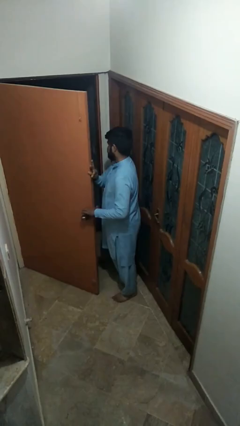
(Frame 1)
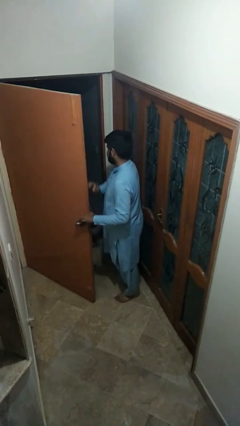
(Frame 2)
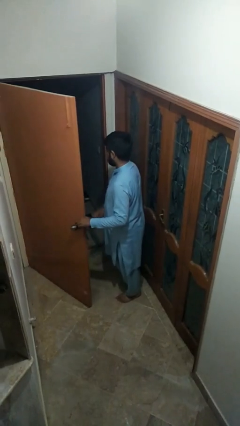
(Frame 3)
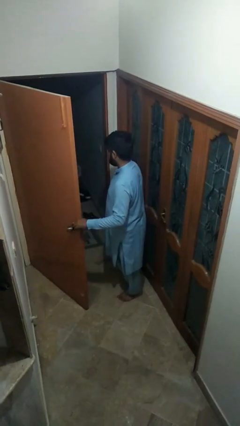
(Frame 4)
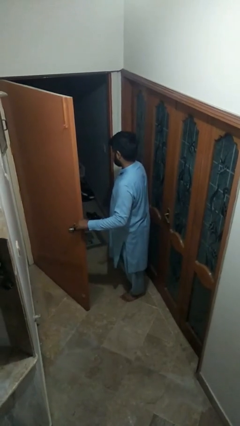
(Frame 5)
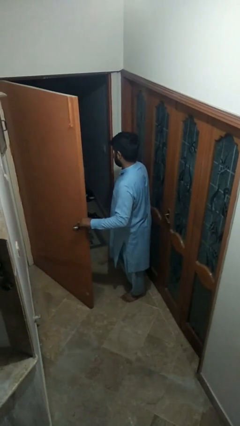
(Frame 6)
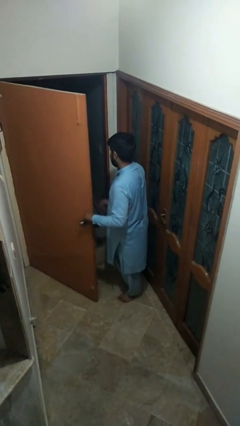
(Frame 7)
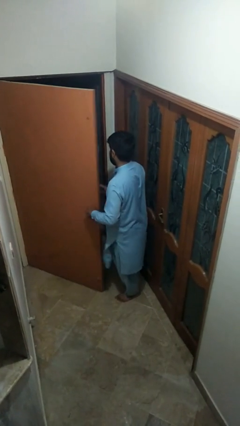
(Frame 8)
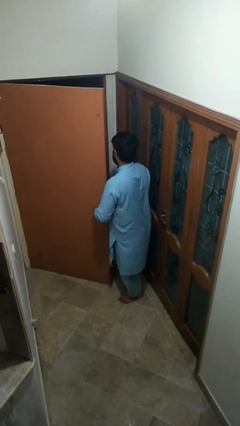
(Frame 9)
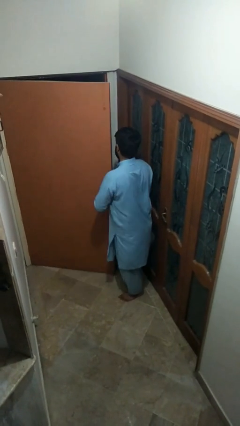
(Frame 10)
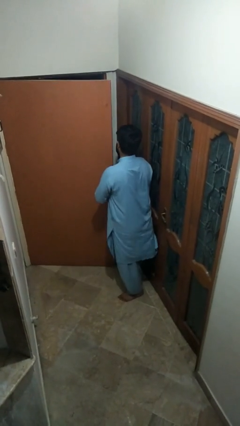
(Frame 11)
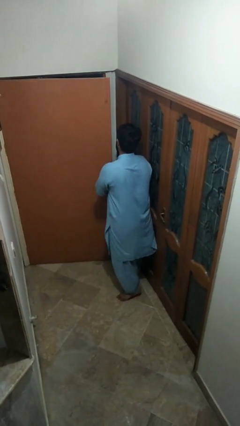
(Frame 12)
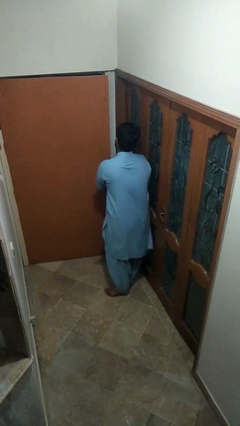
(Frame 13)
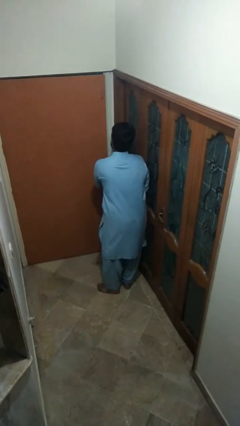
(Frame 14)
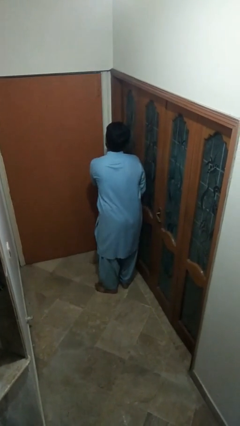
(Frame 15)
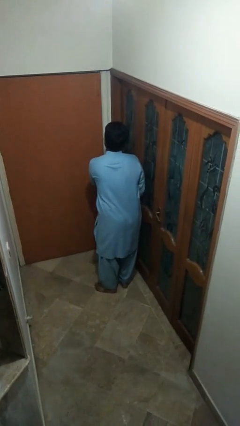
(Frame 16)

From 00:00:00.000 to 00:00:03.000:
person closes facility door

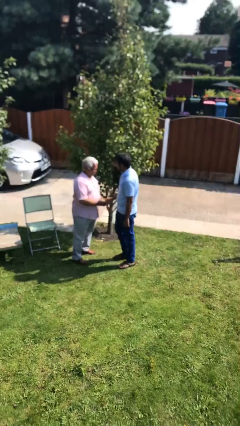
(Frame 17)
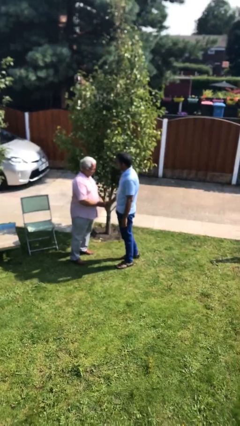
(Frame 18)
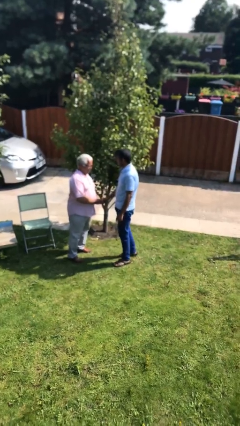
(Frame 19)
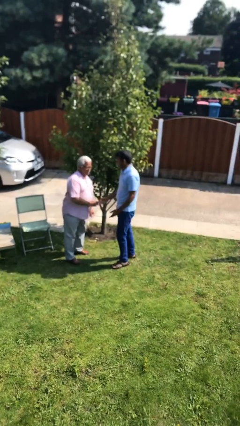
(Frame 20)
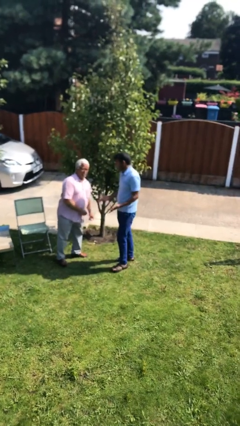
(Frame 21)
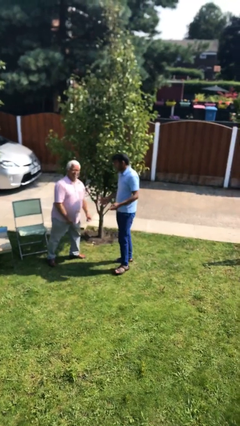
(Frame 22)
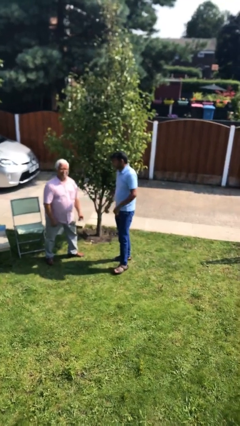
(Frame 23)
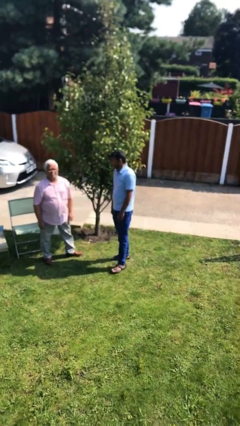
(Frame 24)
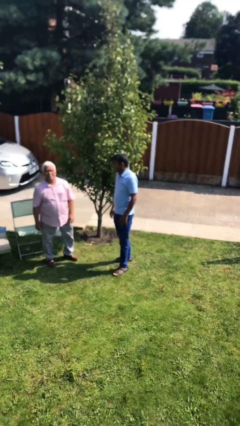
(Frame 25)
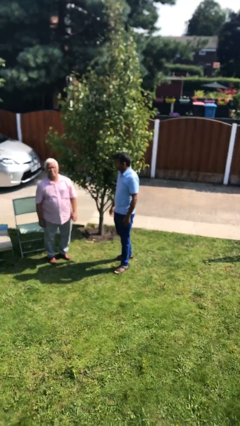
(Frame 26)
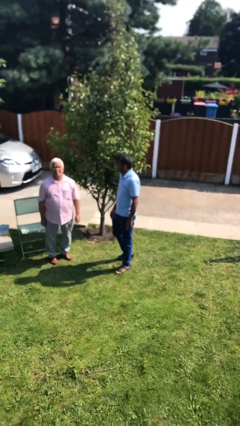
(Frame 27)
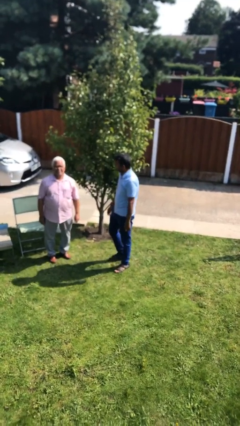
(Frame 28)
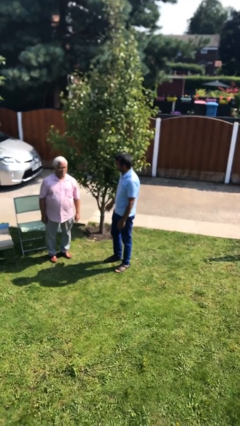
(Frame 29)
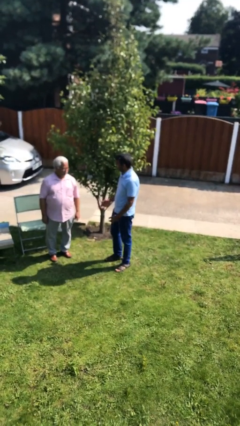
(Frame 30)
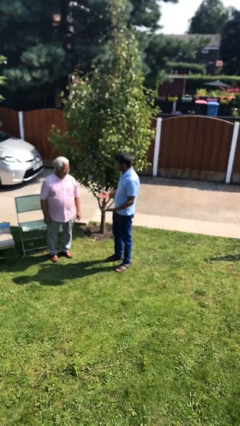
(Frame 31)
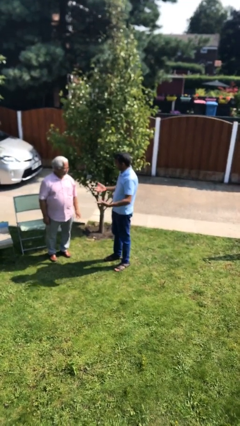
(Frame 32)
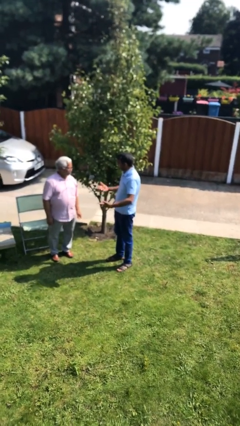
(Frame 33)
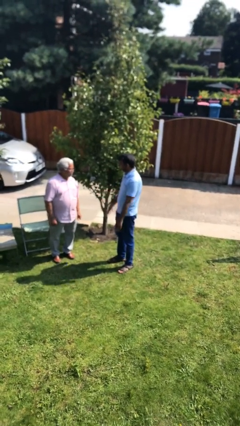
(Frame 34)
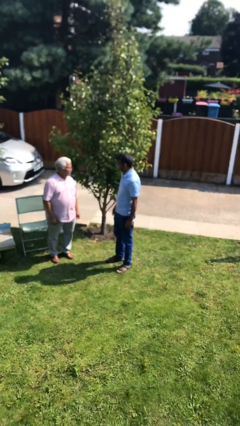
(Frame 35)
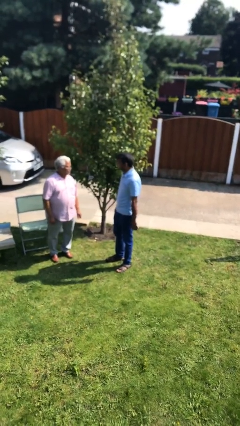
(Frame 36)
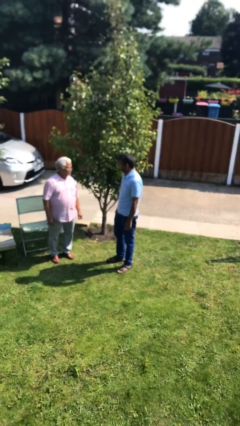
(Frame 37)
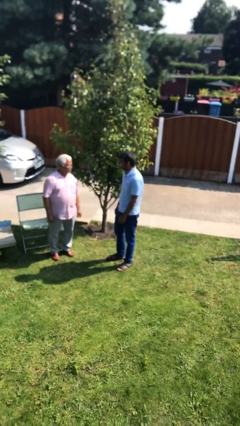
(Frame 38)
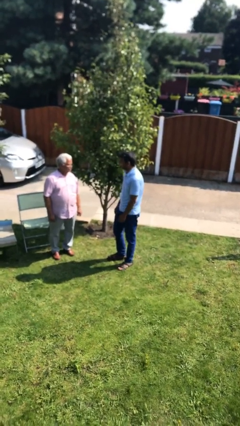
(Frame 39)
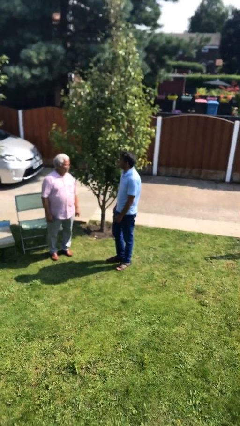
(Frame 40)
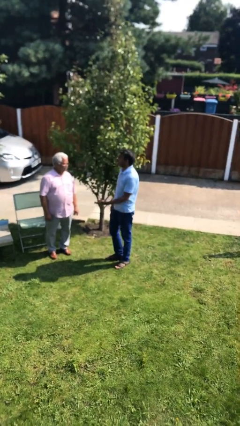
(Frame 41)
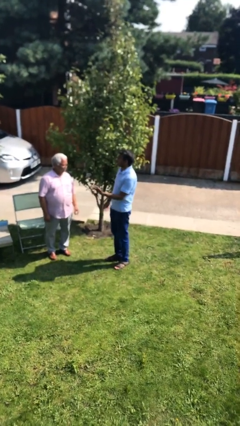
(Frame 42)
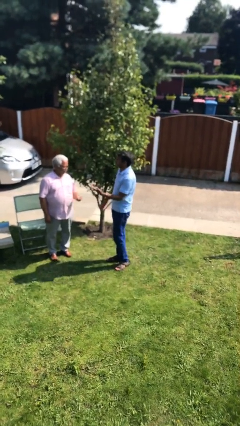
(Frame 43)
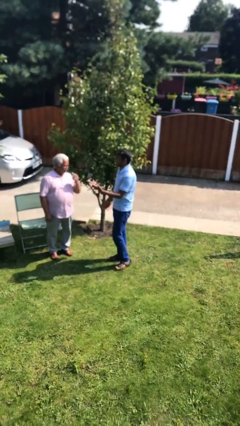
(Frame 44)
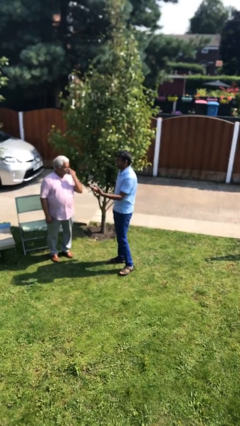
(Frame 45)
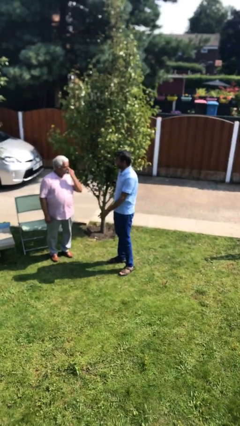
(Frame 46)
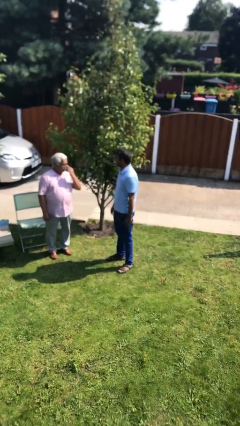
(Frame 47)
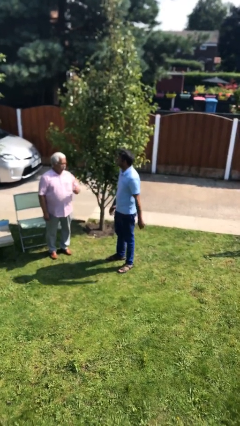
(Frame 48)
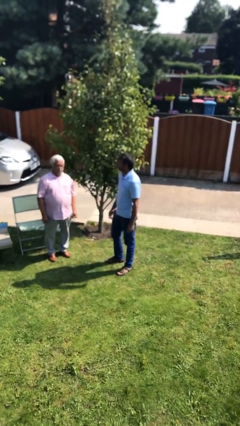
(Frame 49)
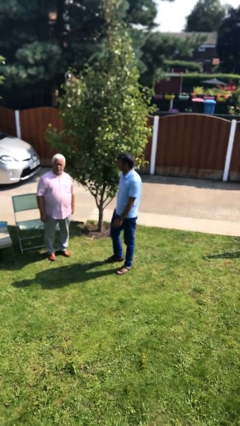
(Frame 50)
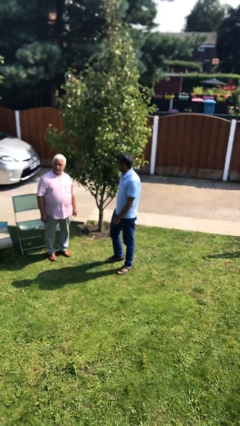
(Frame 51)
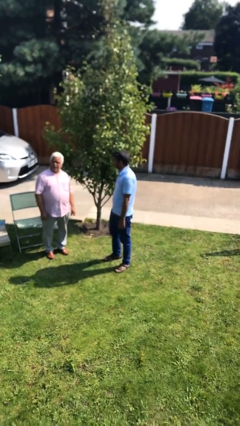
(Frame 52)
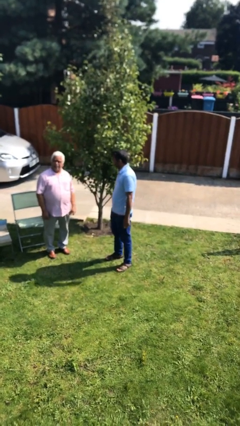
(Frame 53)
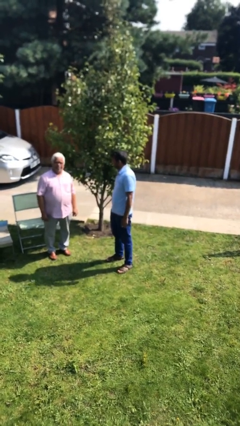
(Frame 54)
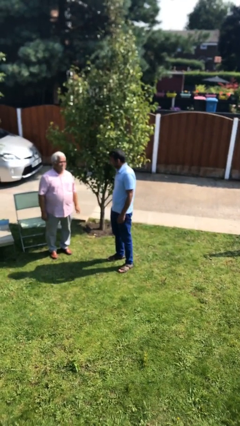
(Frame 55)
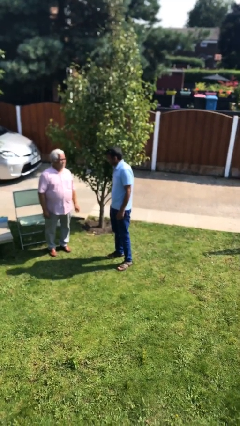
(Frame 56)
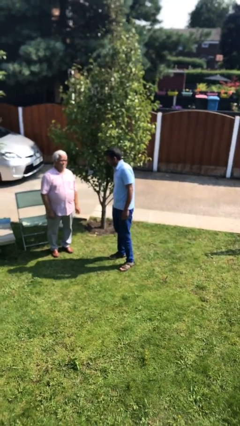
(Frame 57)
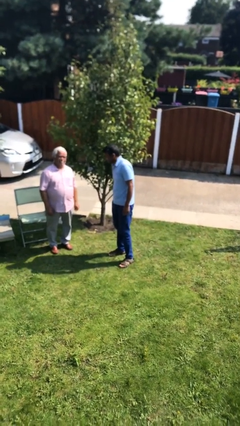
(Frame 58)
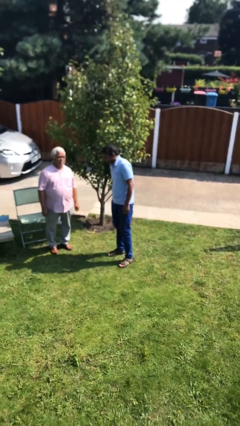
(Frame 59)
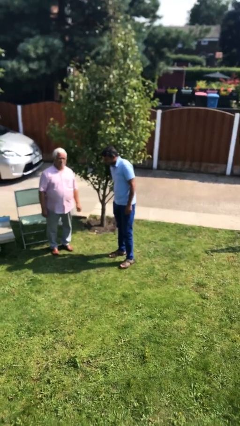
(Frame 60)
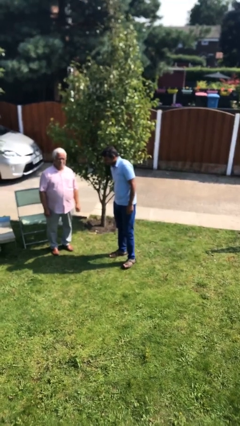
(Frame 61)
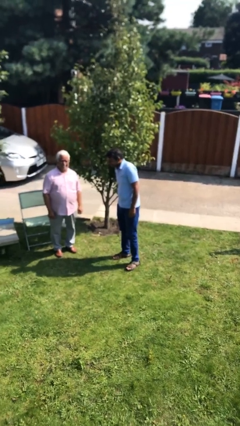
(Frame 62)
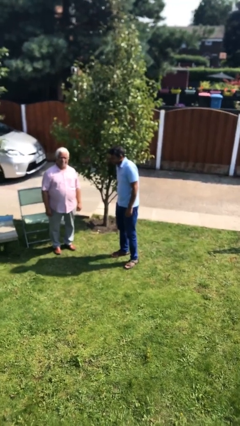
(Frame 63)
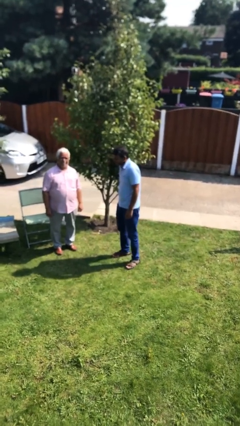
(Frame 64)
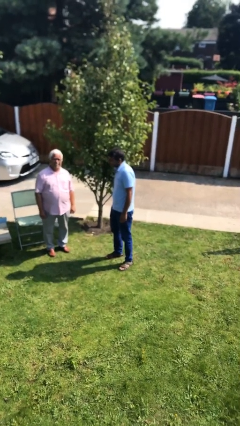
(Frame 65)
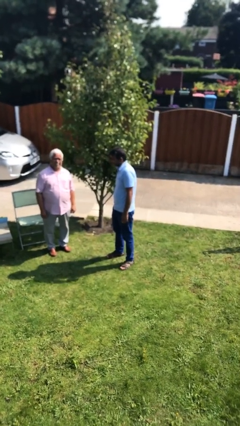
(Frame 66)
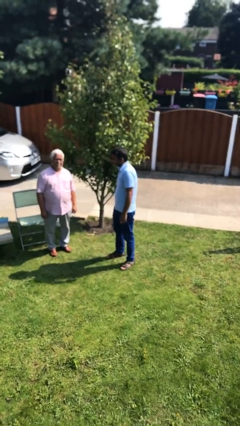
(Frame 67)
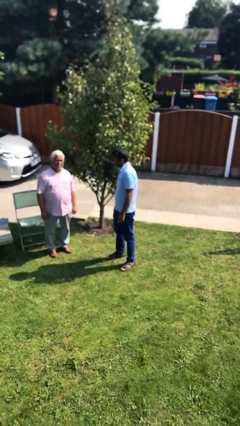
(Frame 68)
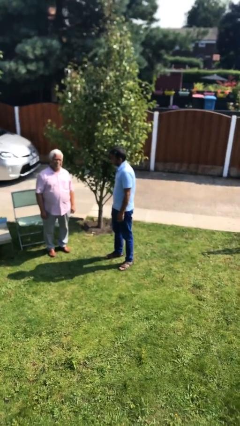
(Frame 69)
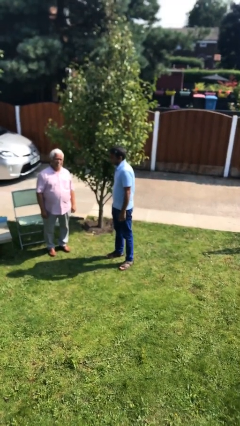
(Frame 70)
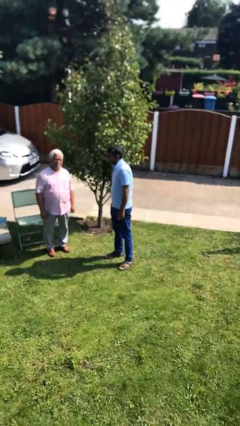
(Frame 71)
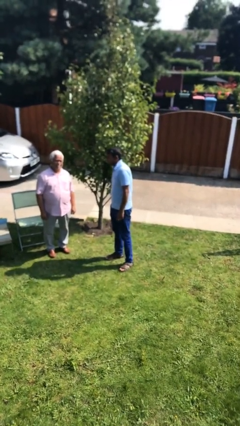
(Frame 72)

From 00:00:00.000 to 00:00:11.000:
person talks to person

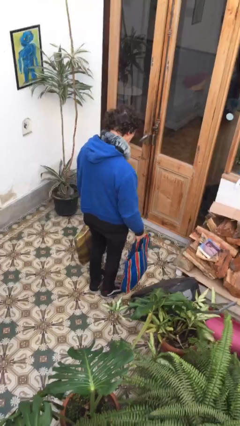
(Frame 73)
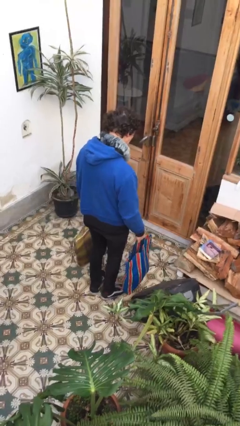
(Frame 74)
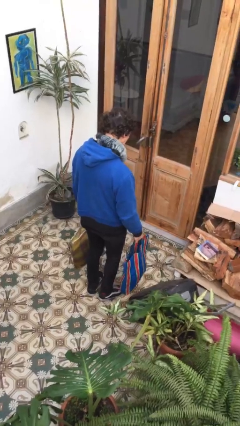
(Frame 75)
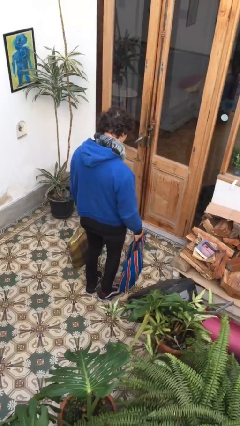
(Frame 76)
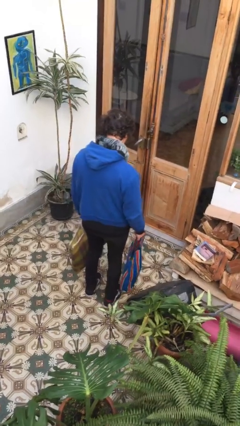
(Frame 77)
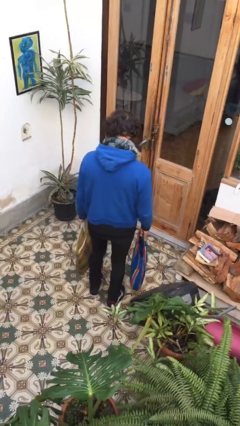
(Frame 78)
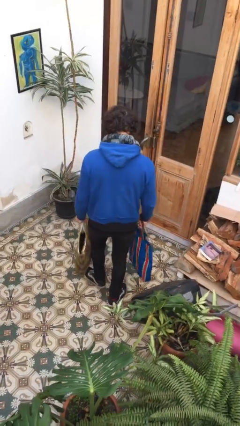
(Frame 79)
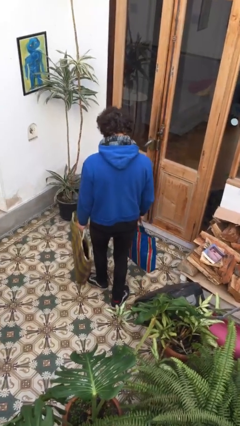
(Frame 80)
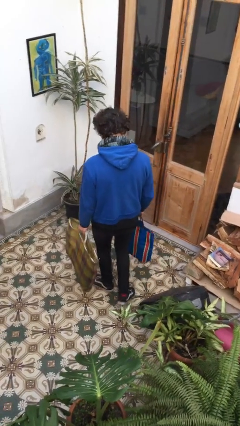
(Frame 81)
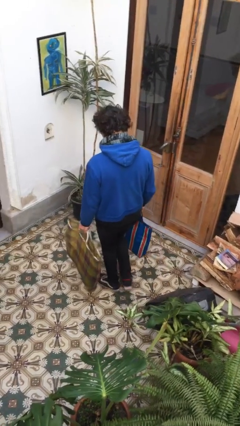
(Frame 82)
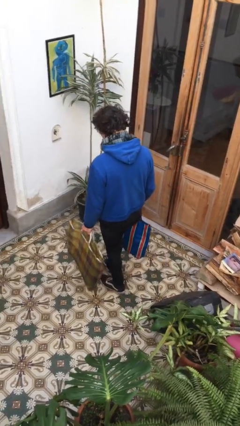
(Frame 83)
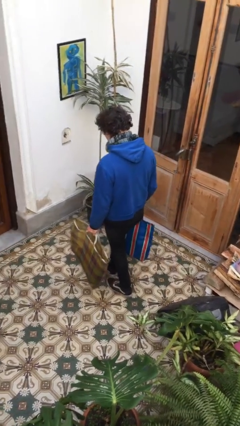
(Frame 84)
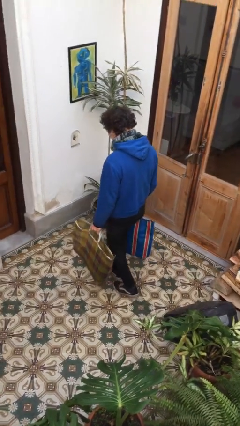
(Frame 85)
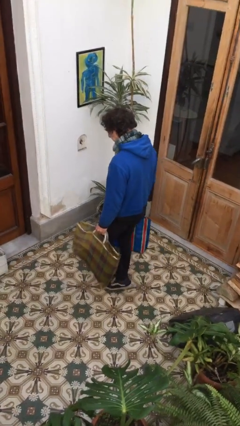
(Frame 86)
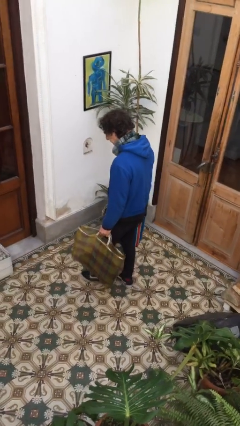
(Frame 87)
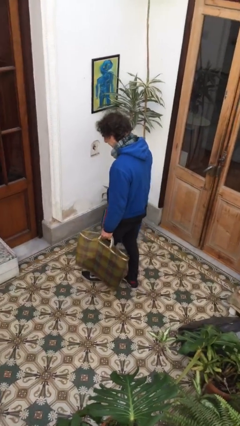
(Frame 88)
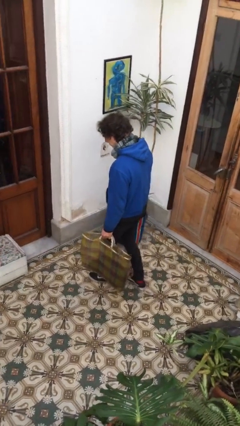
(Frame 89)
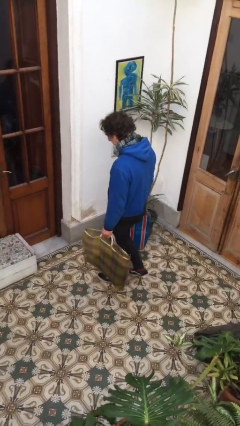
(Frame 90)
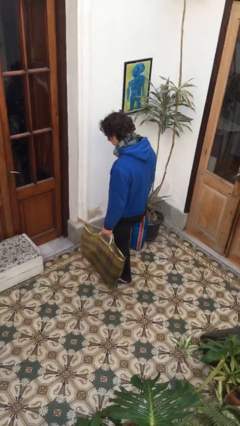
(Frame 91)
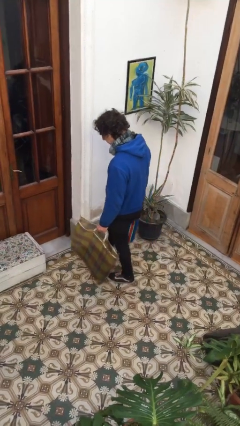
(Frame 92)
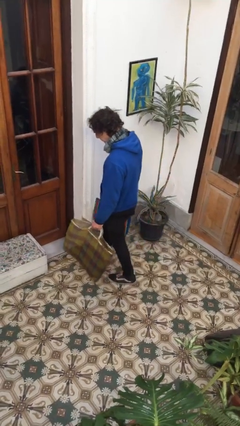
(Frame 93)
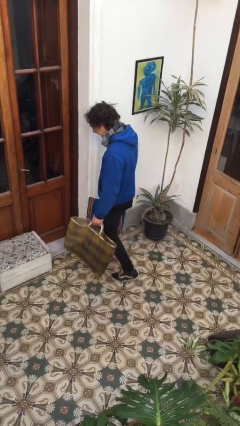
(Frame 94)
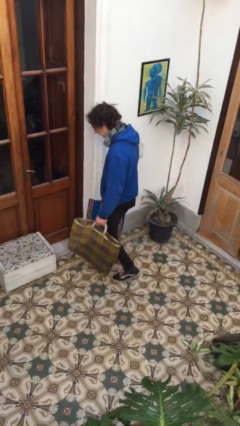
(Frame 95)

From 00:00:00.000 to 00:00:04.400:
person carries groceries
